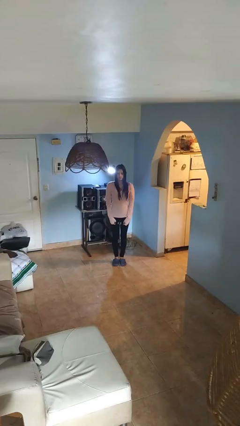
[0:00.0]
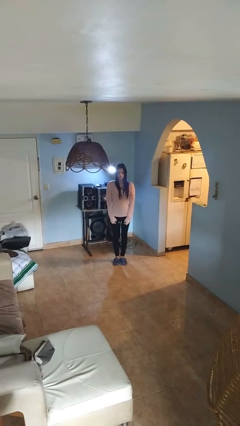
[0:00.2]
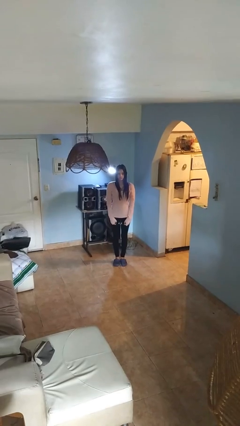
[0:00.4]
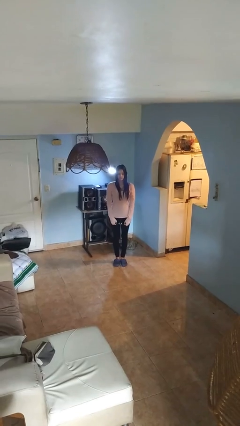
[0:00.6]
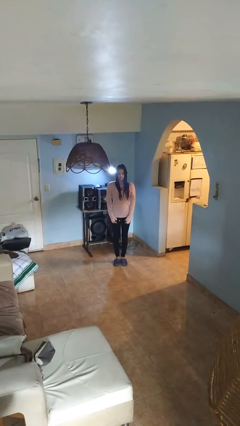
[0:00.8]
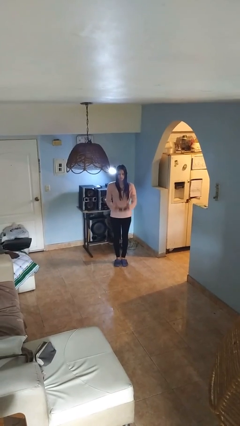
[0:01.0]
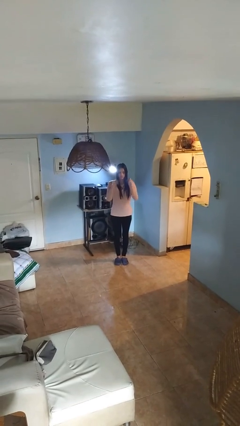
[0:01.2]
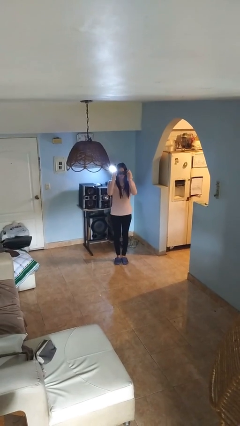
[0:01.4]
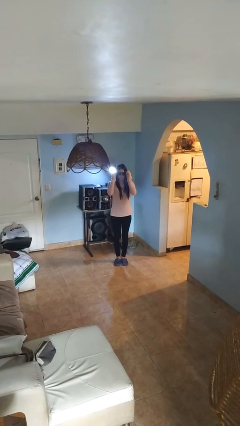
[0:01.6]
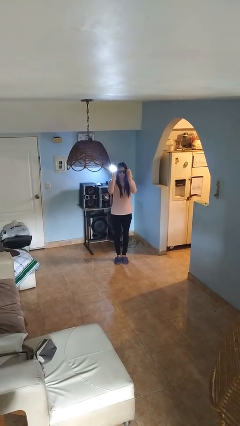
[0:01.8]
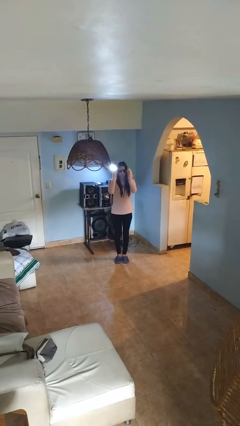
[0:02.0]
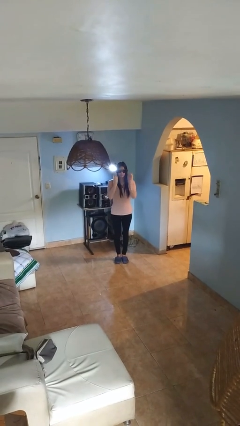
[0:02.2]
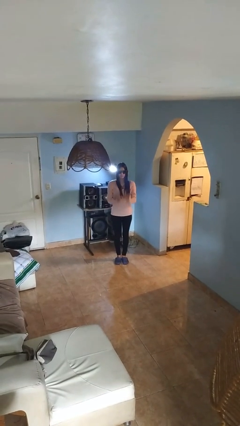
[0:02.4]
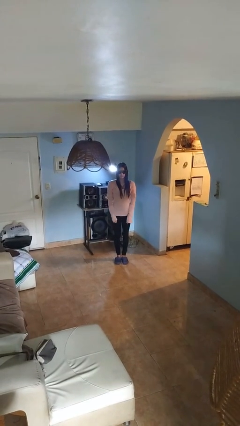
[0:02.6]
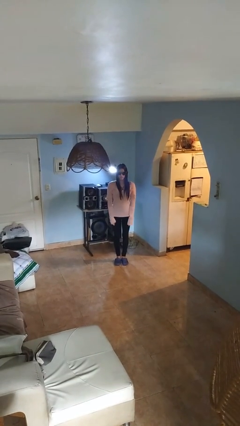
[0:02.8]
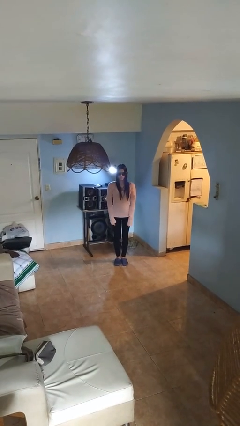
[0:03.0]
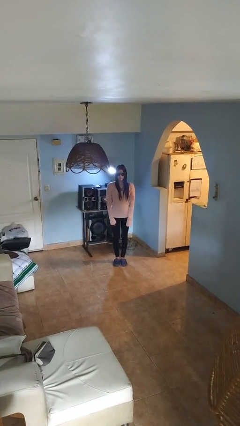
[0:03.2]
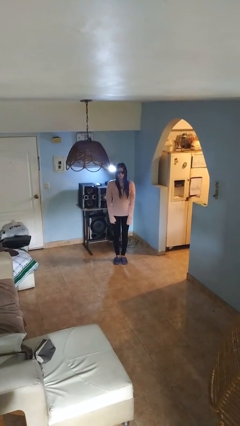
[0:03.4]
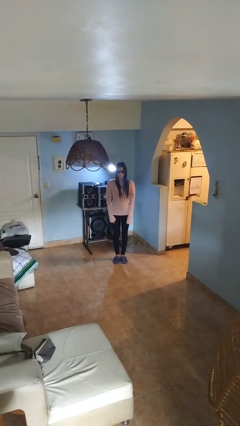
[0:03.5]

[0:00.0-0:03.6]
person puts on sunglasses

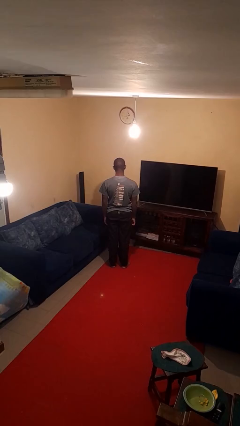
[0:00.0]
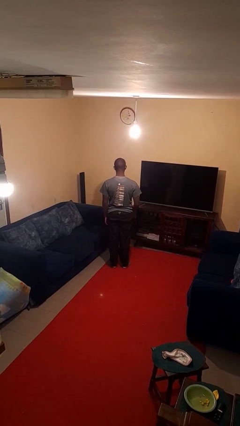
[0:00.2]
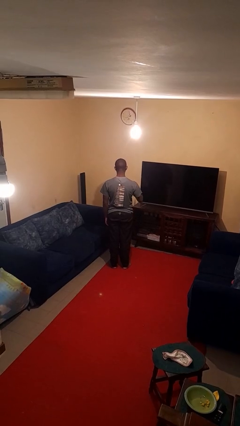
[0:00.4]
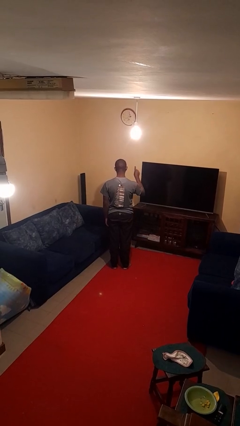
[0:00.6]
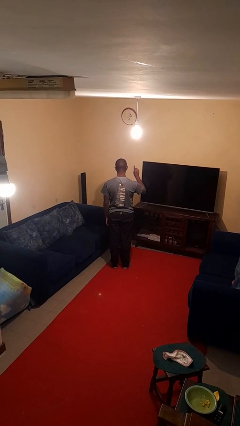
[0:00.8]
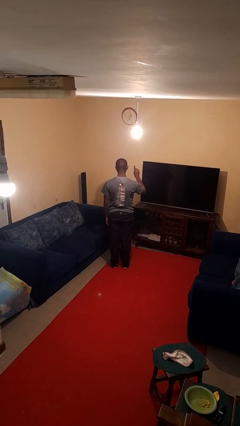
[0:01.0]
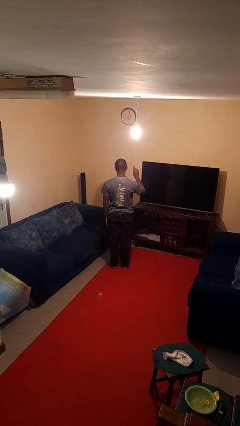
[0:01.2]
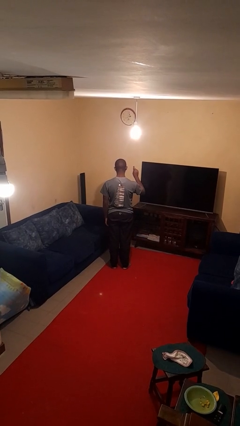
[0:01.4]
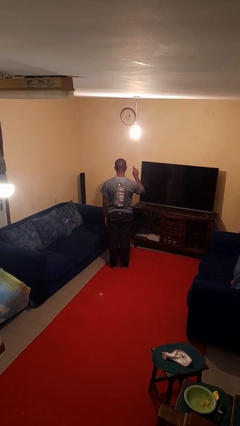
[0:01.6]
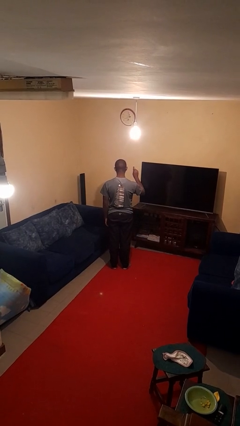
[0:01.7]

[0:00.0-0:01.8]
person gestures number one

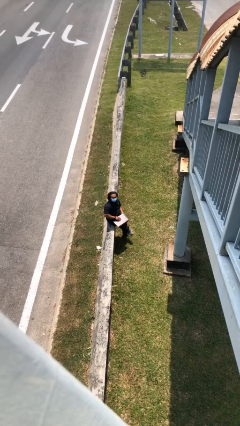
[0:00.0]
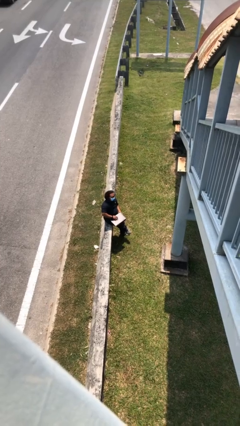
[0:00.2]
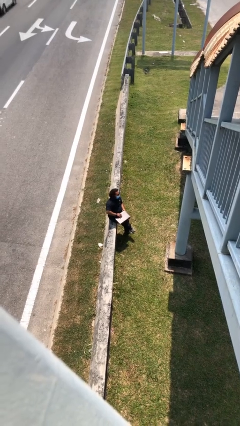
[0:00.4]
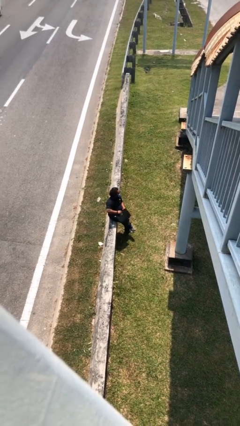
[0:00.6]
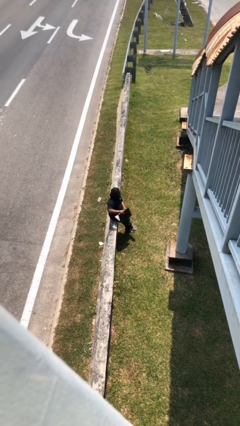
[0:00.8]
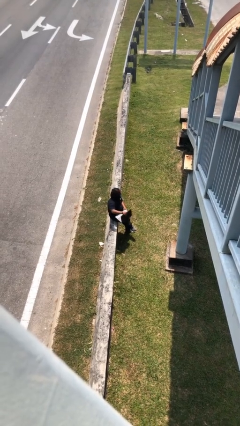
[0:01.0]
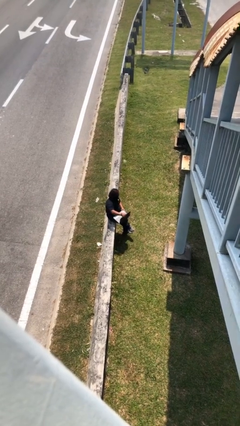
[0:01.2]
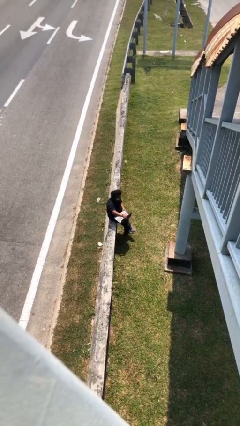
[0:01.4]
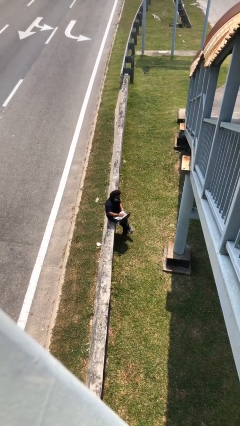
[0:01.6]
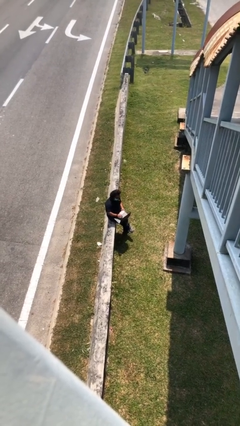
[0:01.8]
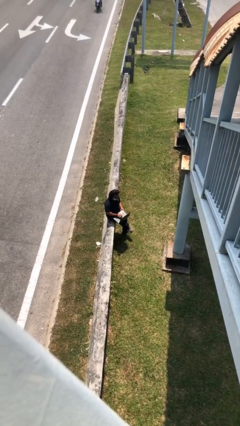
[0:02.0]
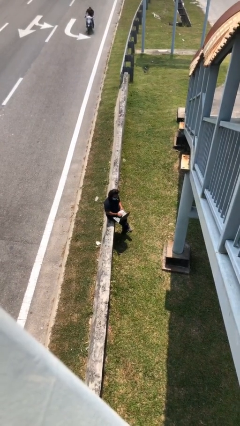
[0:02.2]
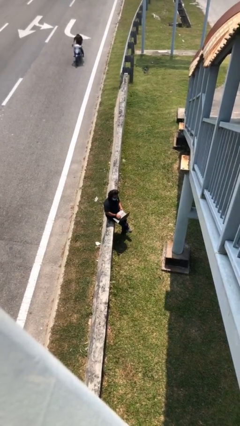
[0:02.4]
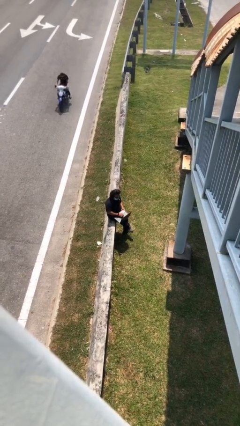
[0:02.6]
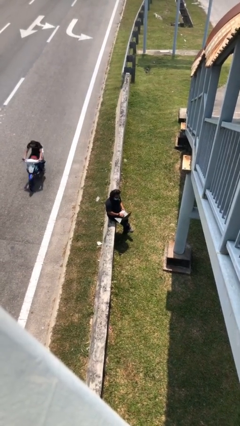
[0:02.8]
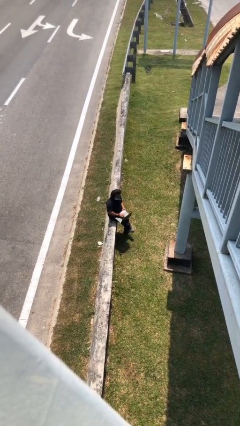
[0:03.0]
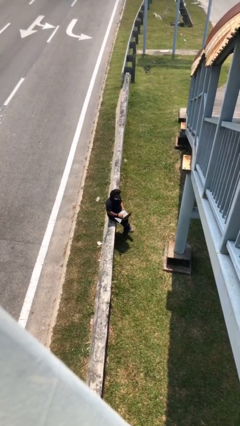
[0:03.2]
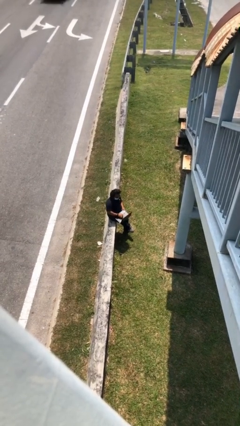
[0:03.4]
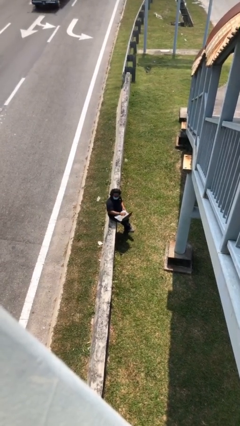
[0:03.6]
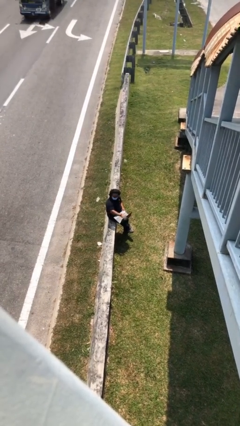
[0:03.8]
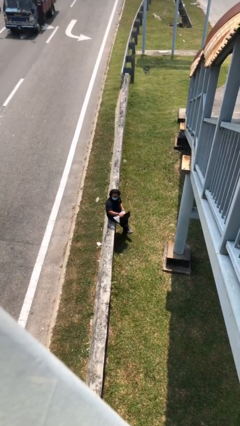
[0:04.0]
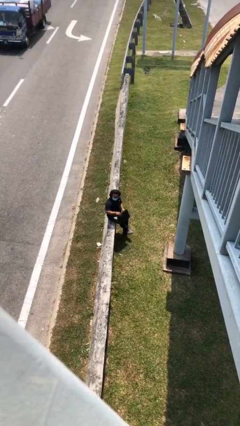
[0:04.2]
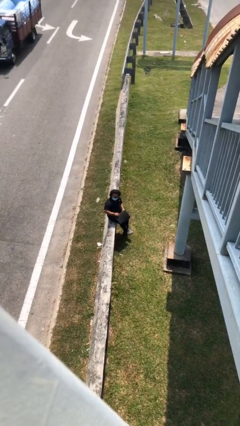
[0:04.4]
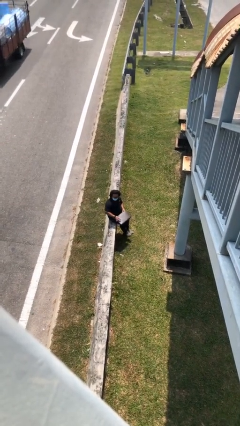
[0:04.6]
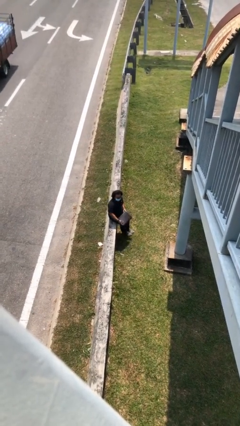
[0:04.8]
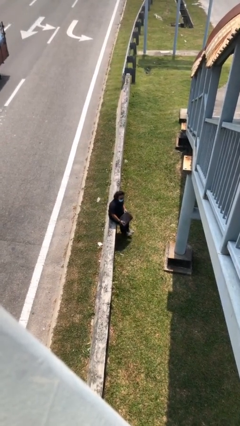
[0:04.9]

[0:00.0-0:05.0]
person interacts with laptop

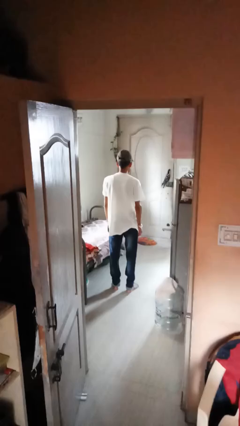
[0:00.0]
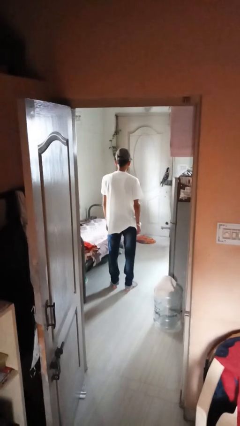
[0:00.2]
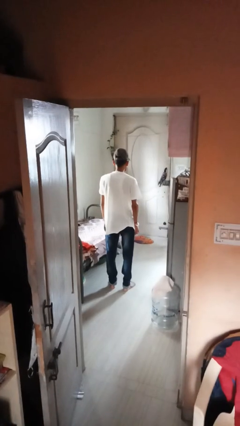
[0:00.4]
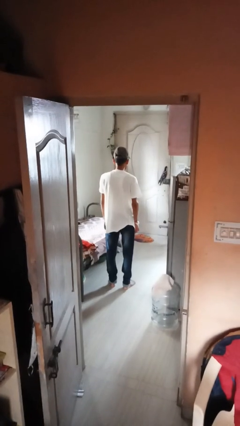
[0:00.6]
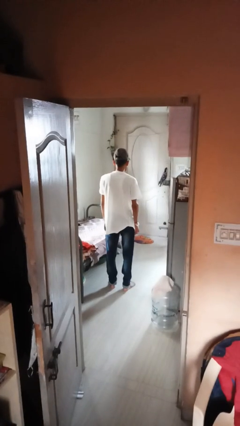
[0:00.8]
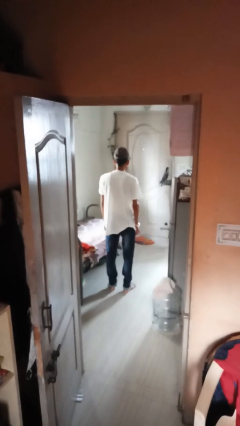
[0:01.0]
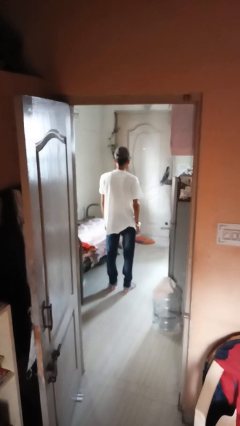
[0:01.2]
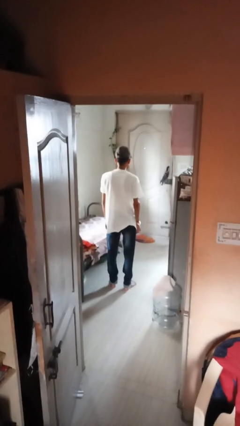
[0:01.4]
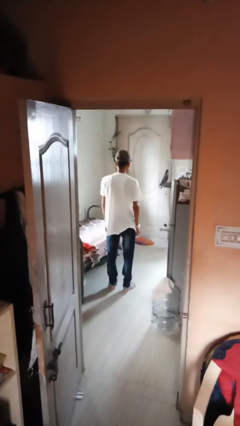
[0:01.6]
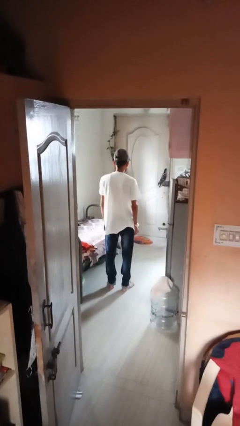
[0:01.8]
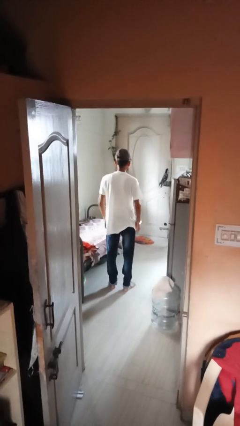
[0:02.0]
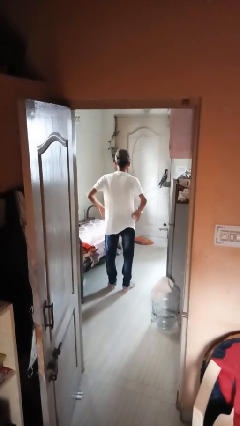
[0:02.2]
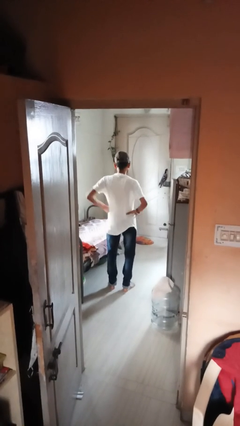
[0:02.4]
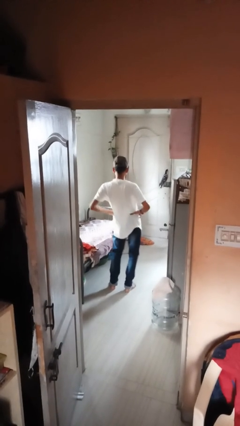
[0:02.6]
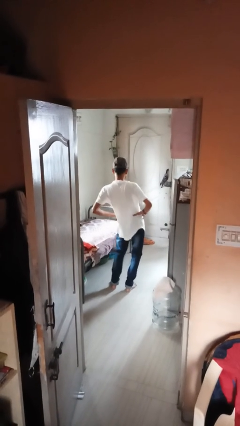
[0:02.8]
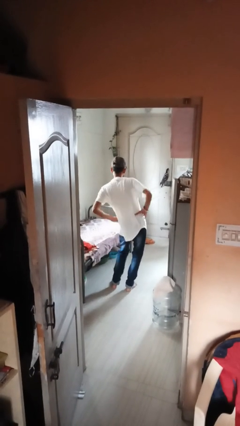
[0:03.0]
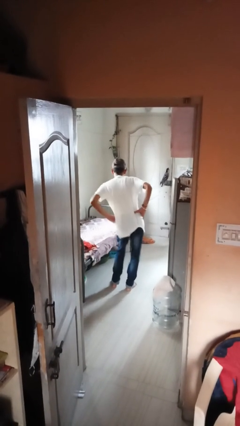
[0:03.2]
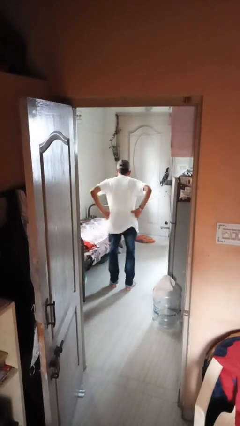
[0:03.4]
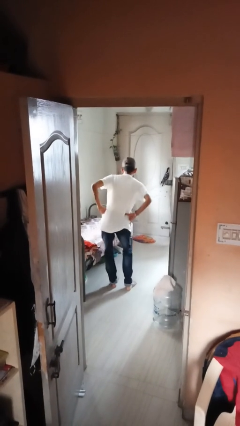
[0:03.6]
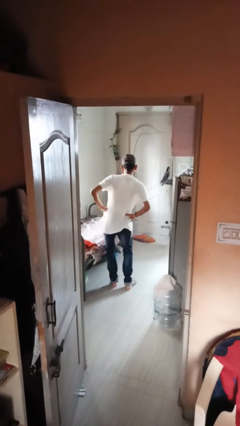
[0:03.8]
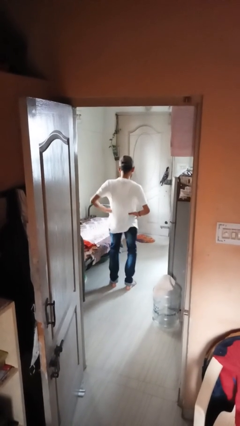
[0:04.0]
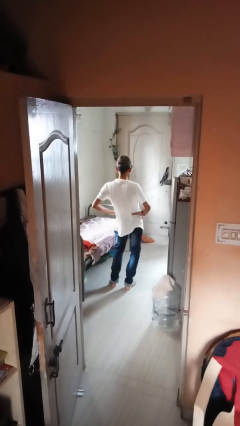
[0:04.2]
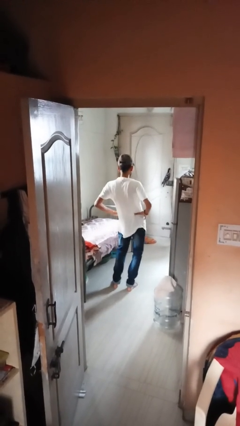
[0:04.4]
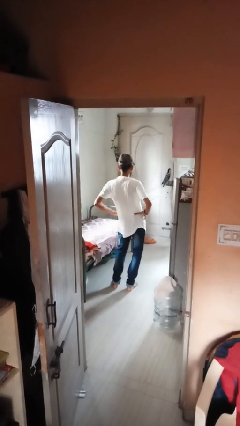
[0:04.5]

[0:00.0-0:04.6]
person wiggles hips

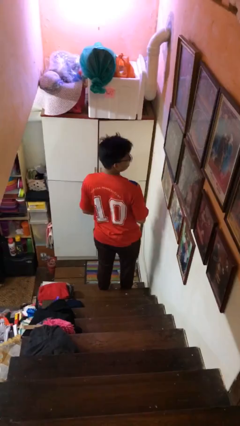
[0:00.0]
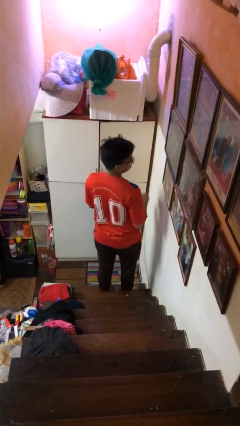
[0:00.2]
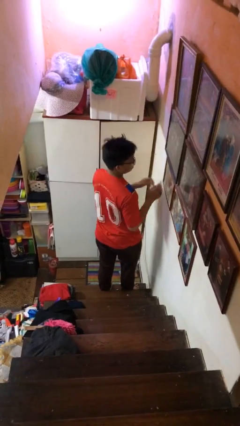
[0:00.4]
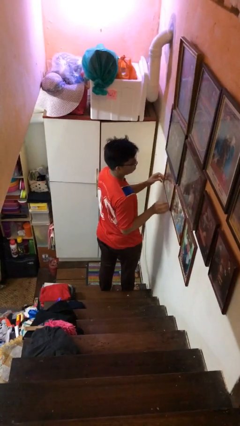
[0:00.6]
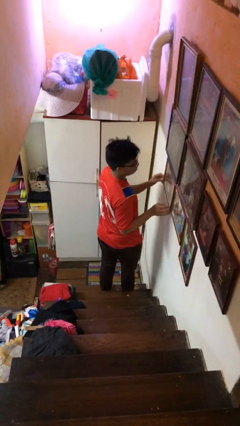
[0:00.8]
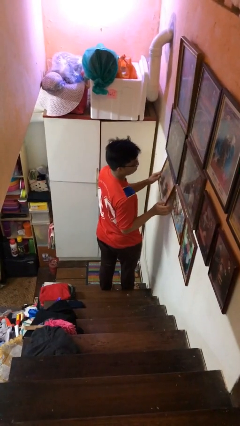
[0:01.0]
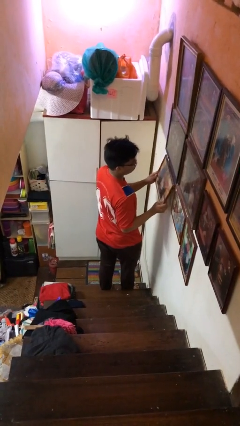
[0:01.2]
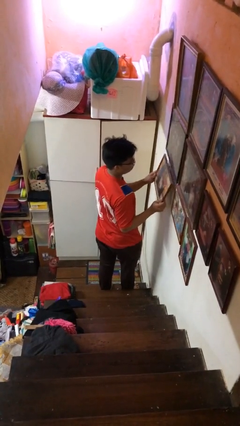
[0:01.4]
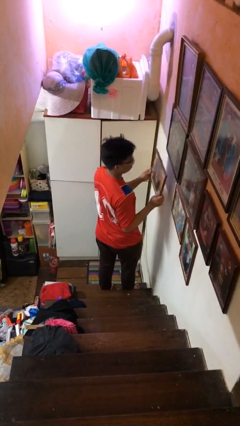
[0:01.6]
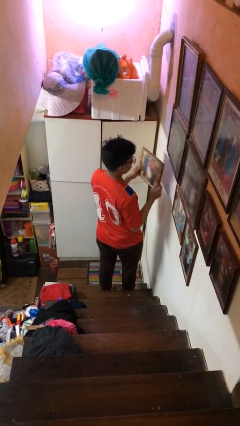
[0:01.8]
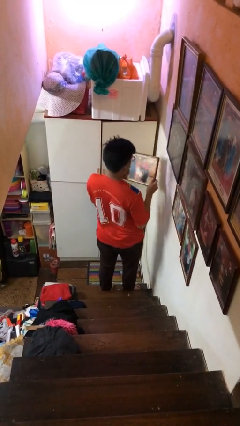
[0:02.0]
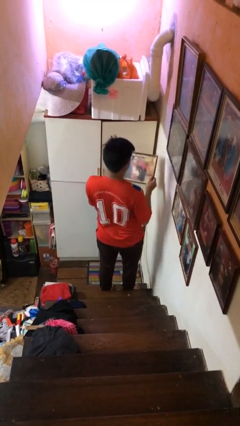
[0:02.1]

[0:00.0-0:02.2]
person takes down picture frame

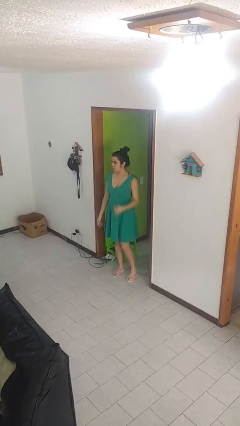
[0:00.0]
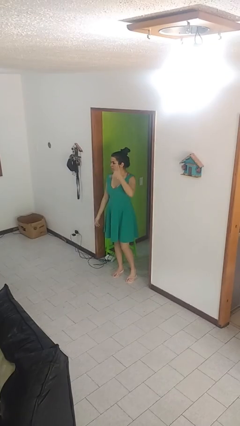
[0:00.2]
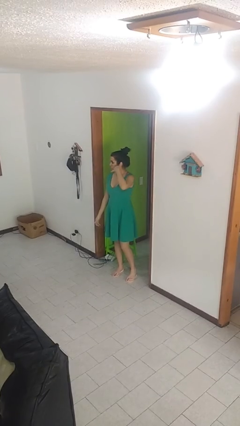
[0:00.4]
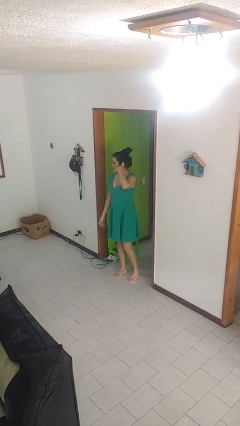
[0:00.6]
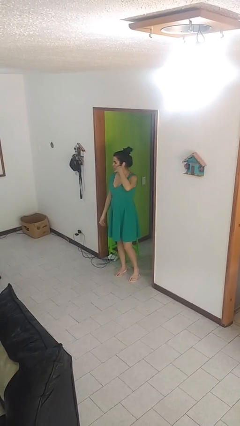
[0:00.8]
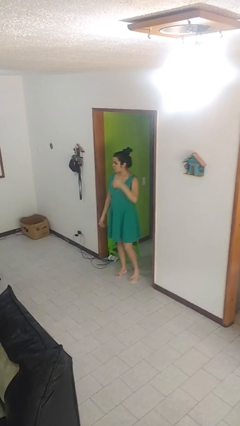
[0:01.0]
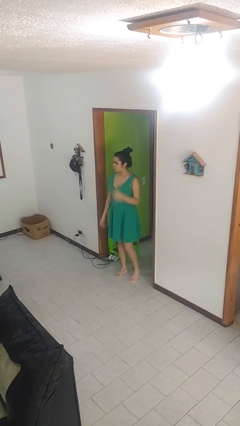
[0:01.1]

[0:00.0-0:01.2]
person gestures call me
